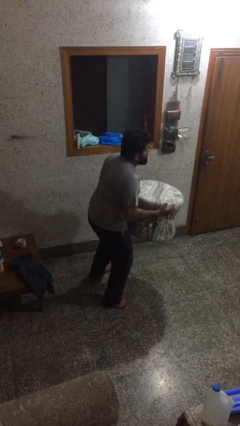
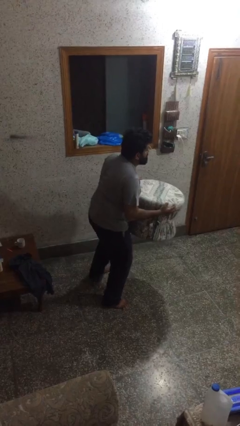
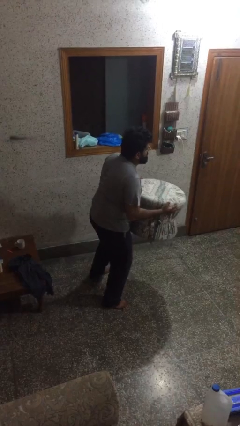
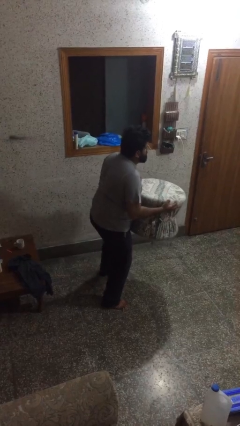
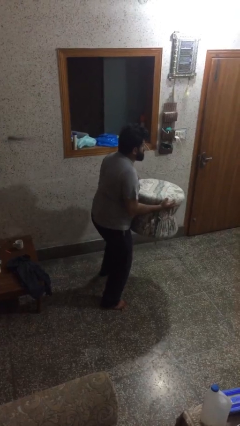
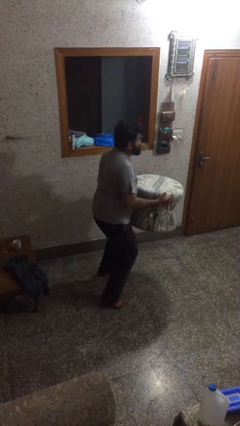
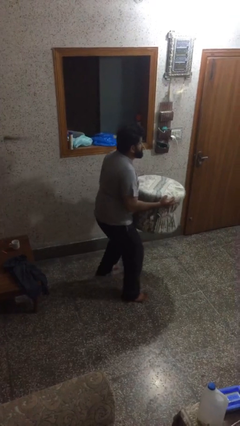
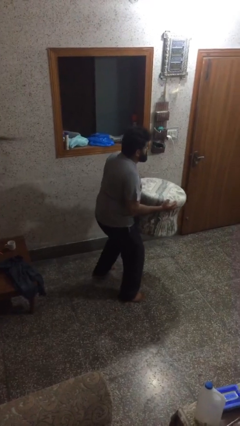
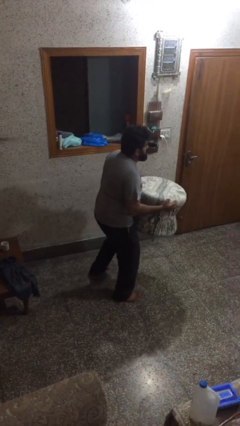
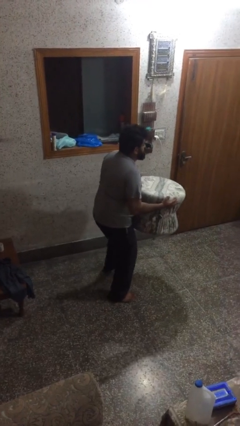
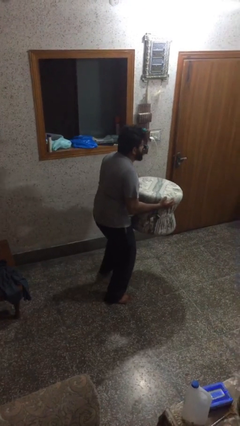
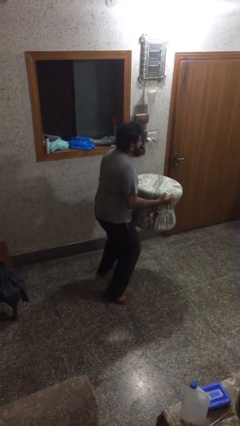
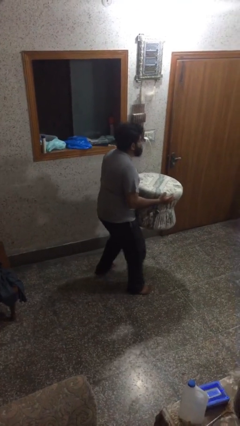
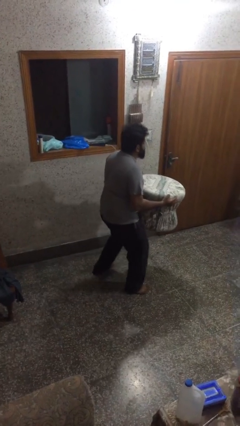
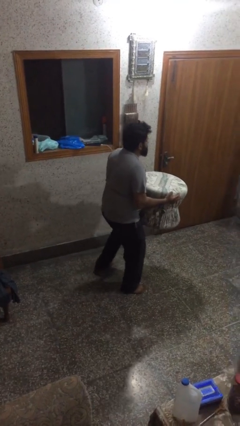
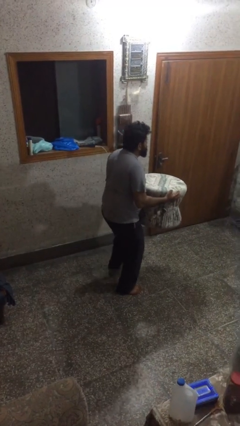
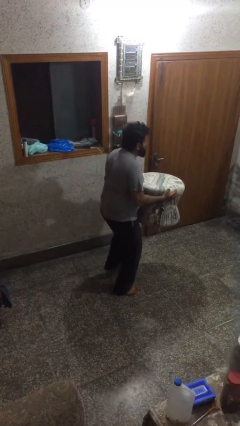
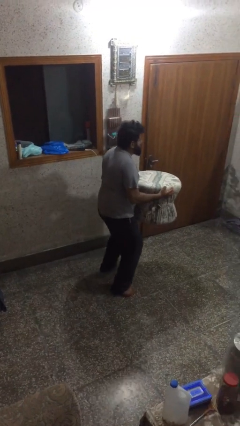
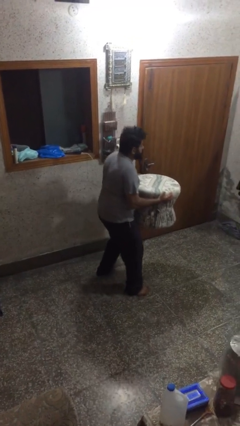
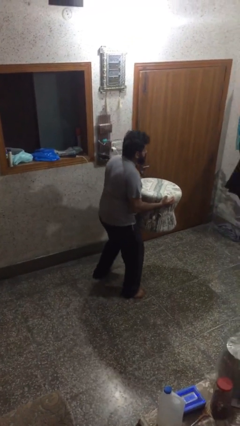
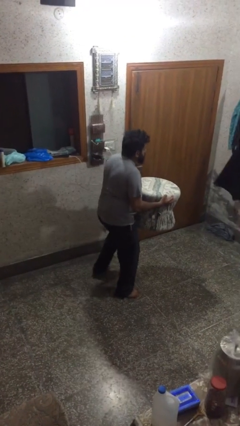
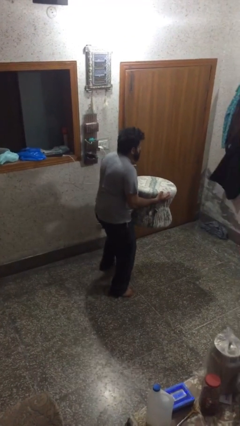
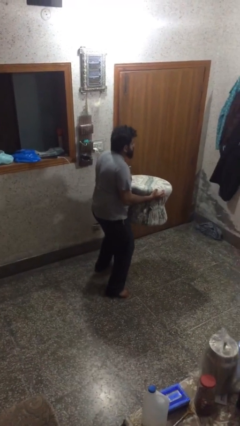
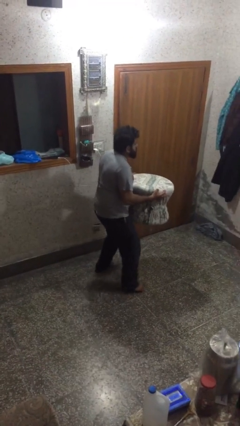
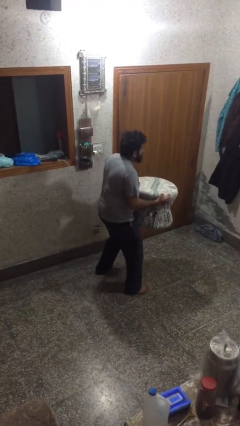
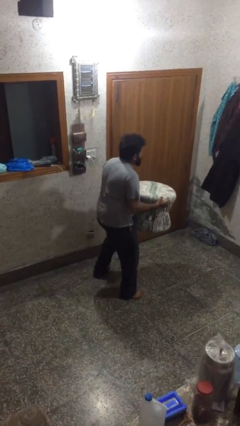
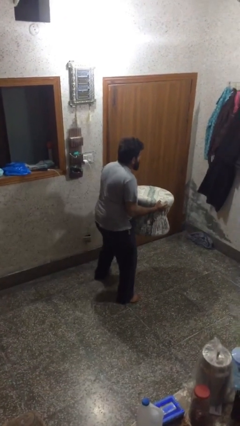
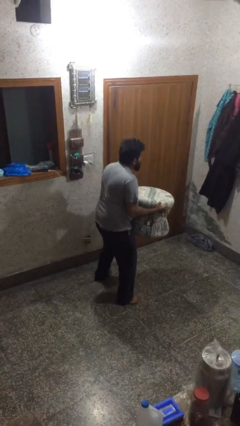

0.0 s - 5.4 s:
person carries heavy object

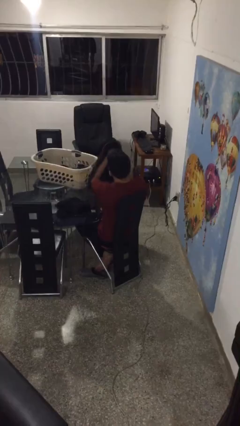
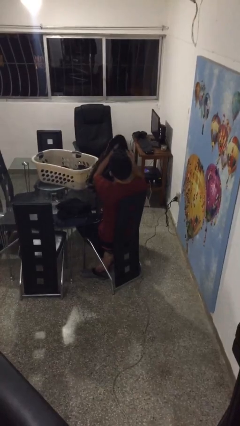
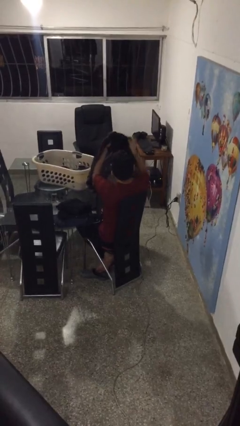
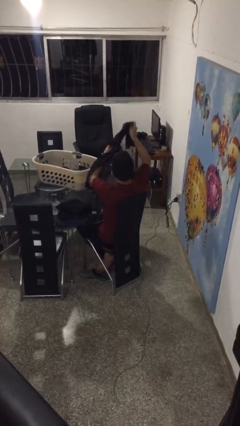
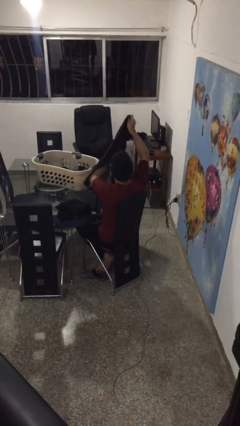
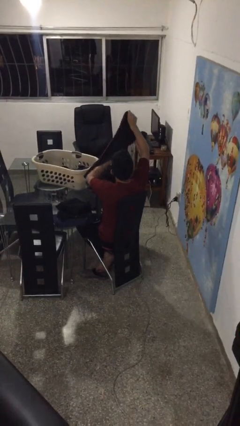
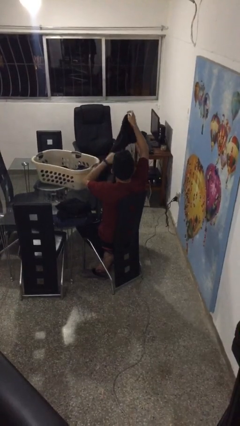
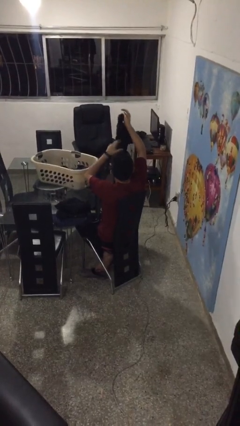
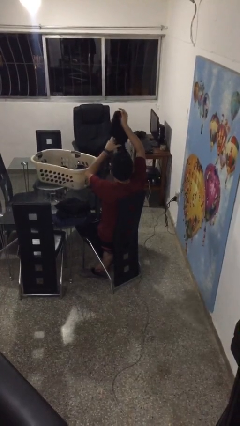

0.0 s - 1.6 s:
person folds pants

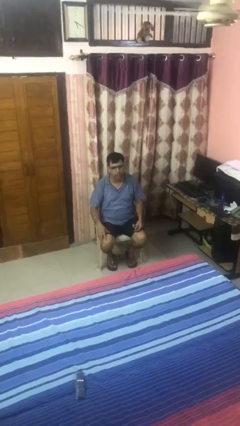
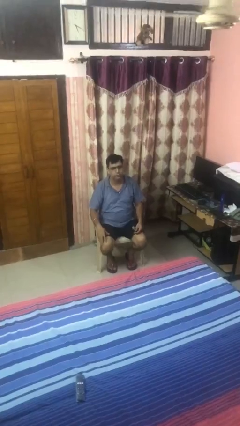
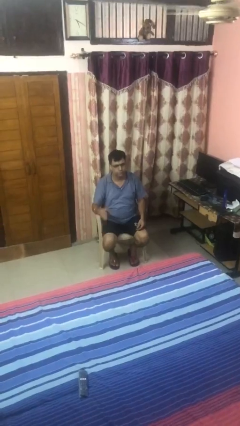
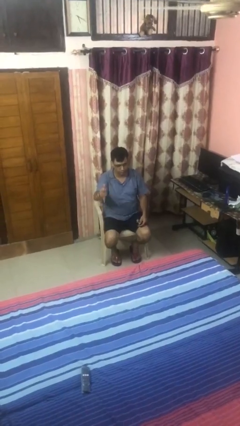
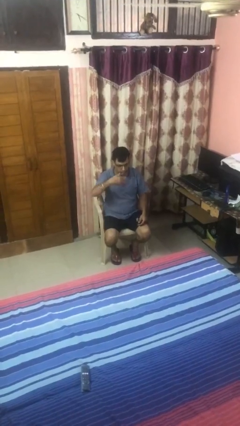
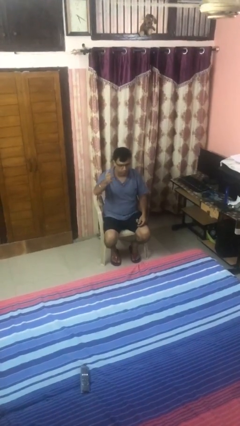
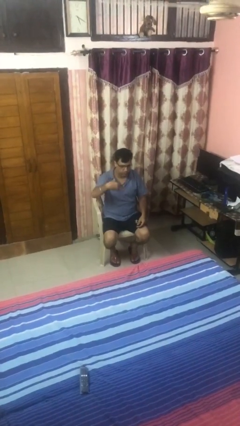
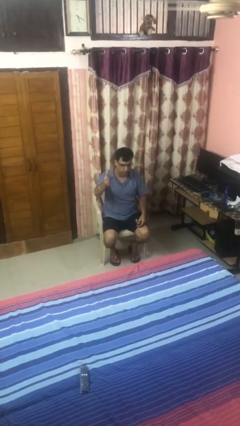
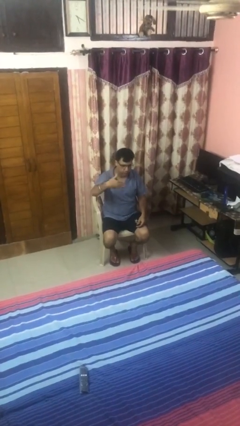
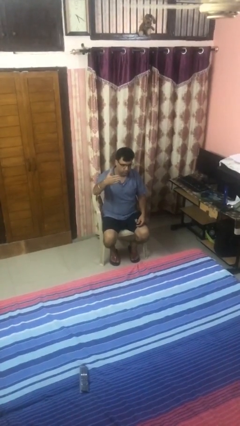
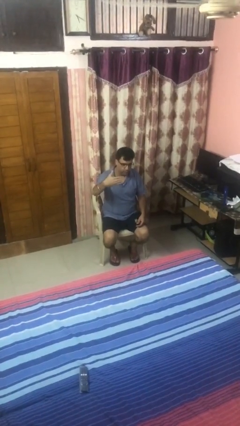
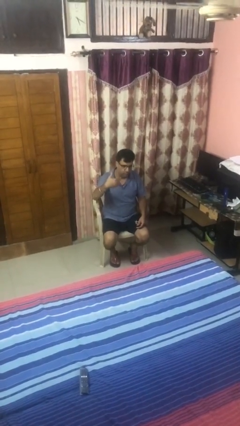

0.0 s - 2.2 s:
person gestures come here

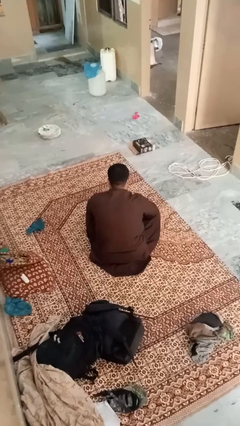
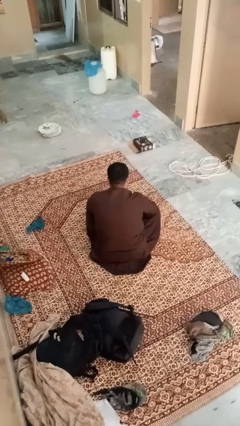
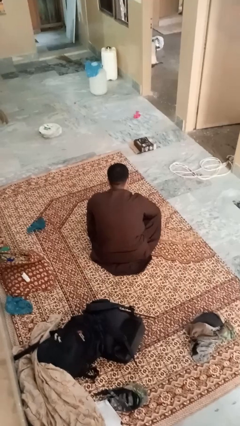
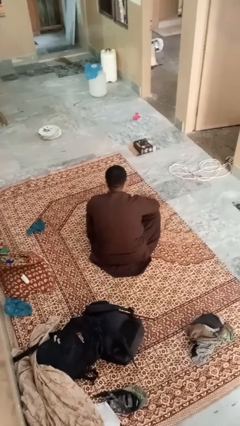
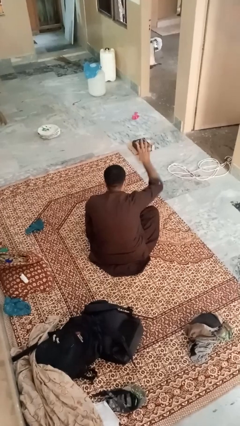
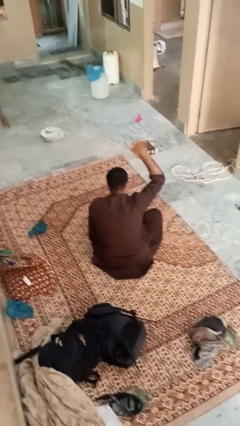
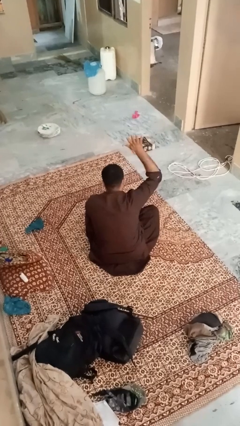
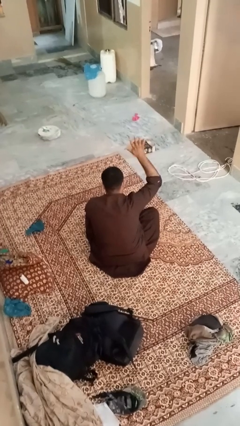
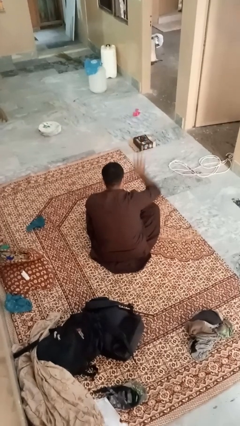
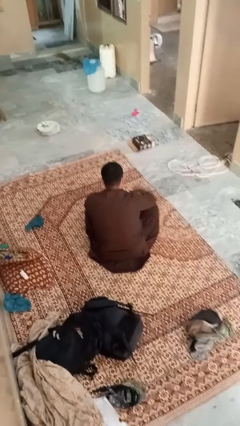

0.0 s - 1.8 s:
person gestures number five

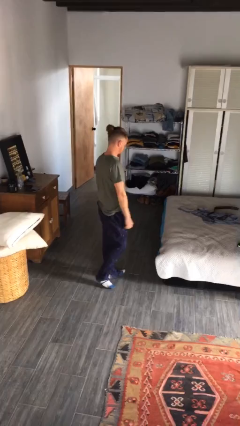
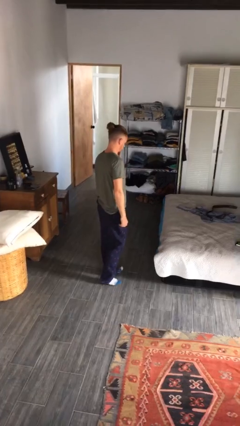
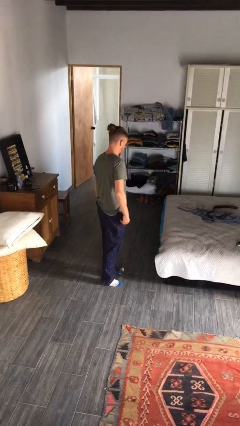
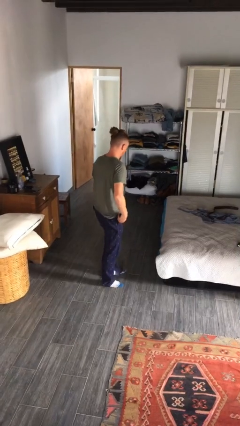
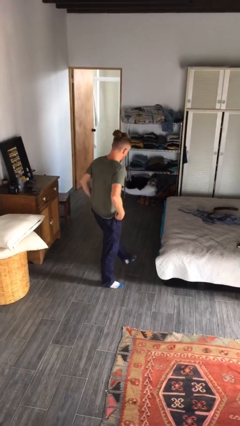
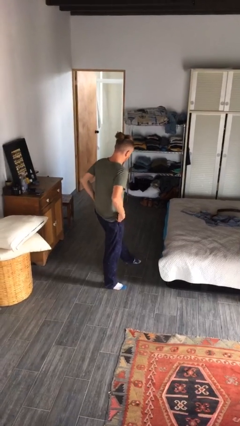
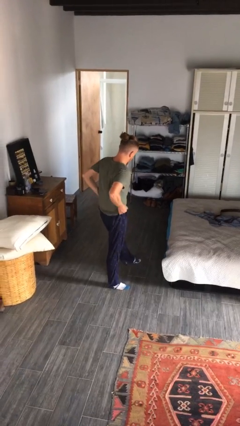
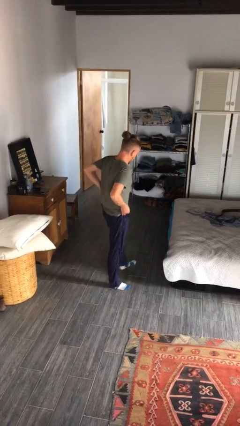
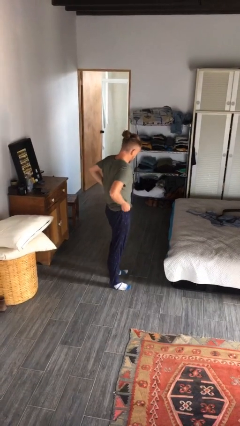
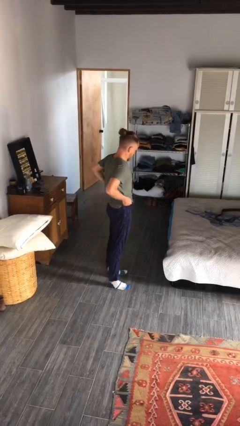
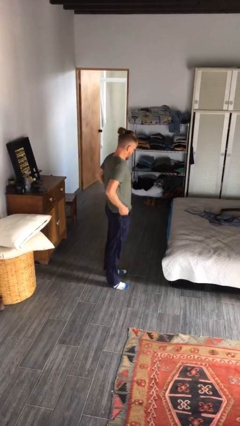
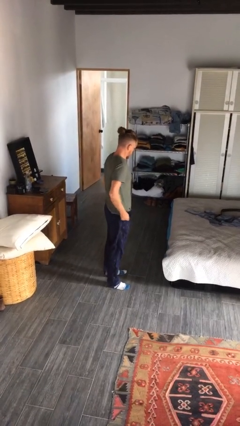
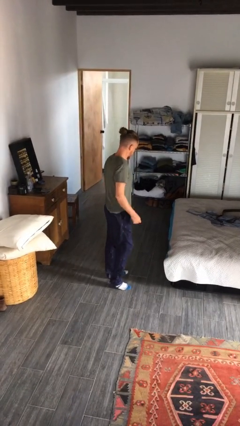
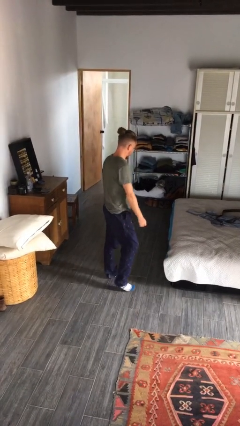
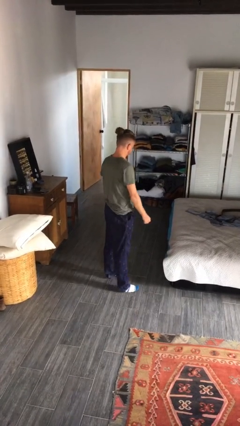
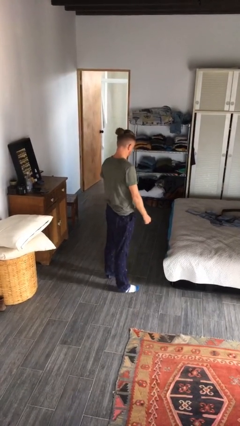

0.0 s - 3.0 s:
person hikes up pants

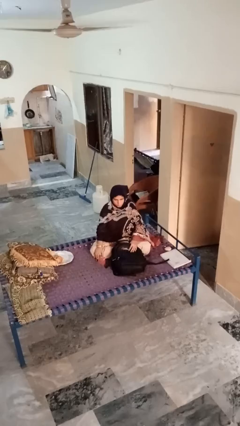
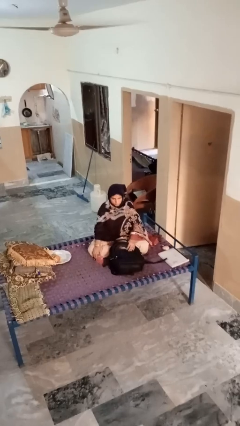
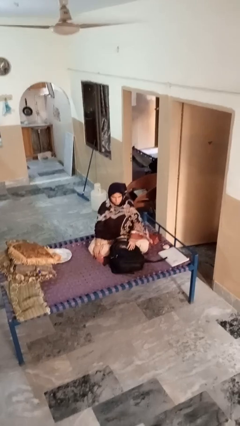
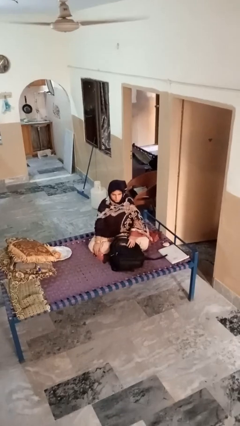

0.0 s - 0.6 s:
person puts object into bag

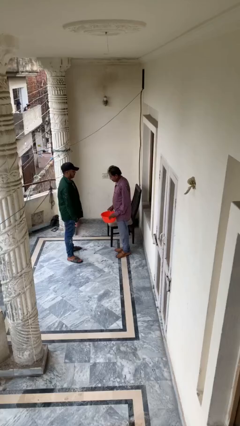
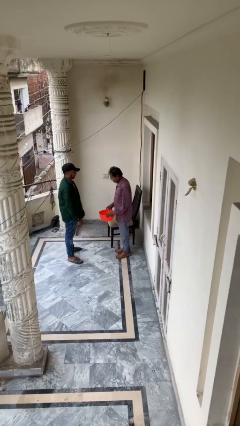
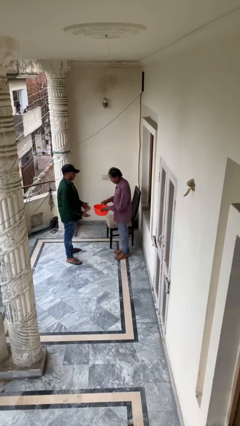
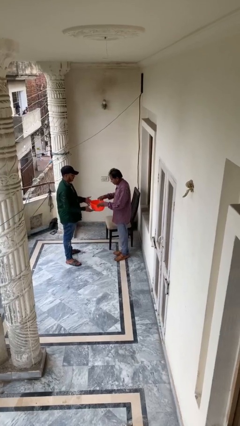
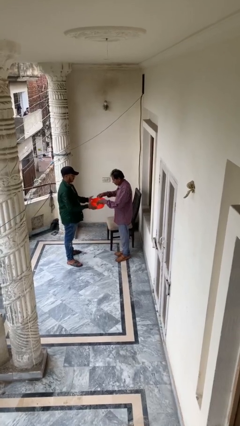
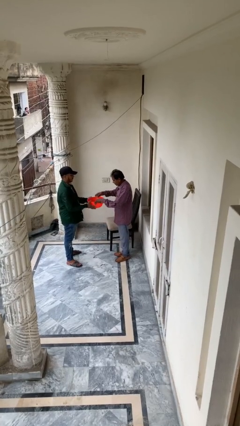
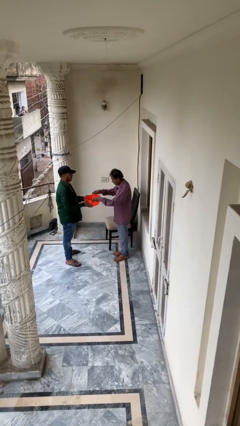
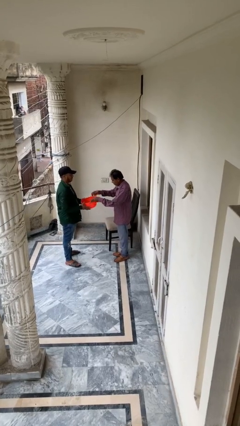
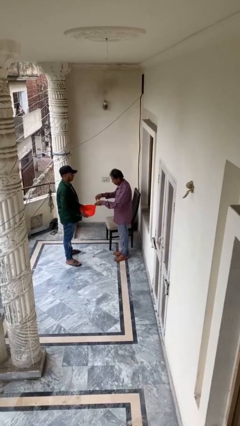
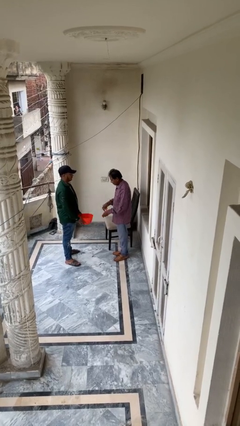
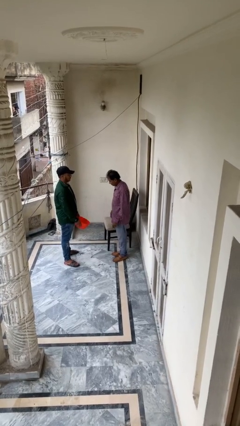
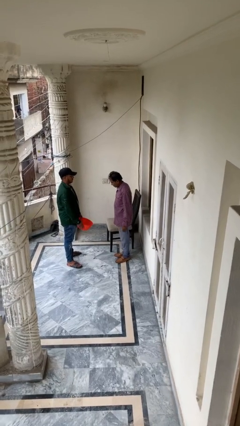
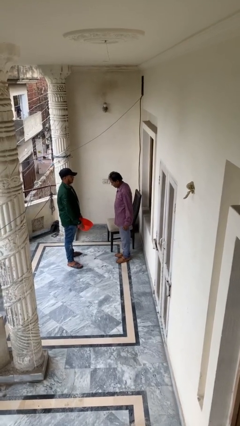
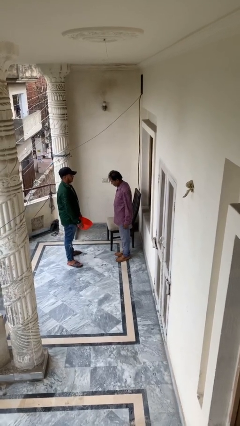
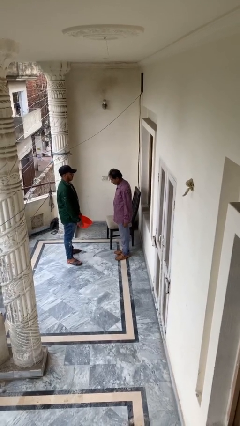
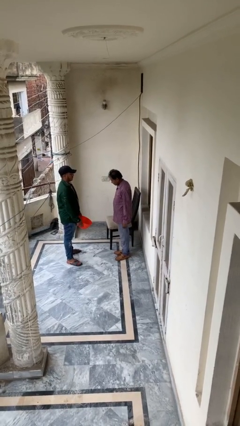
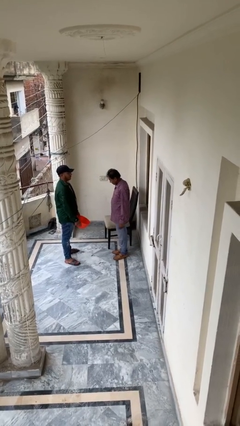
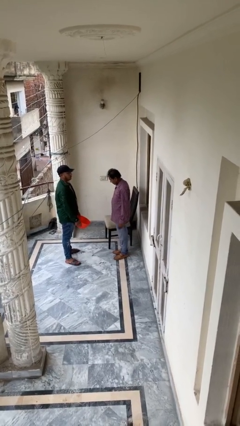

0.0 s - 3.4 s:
person transfers object to person
